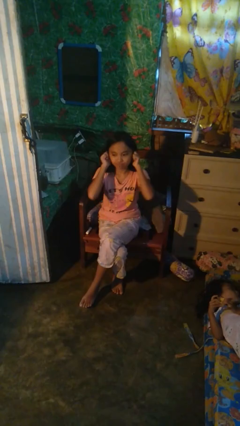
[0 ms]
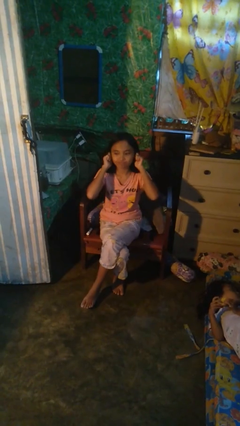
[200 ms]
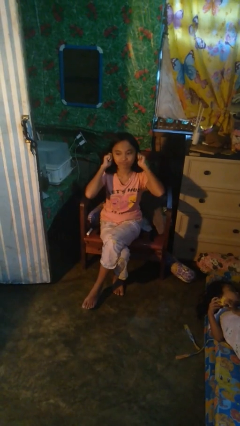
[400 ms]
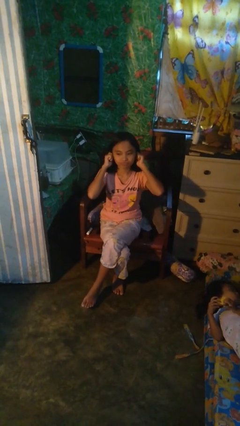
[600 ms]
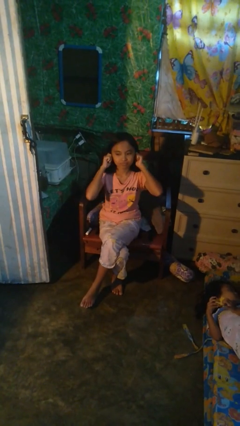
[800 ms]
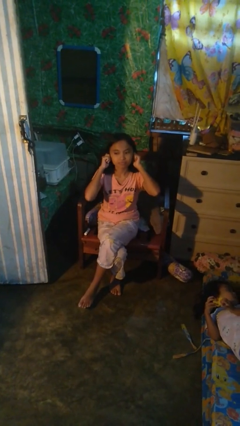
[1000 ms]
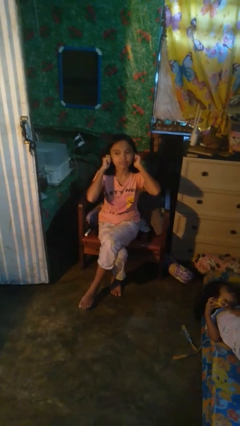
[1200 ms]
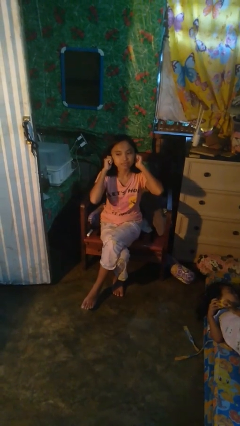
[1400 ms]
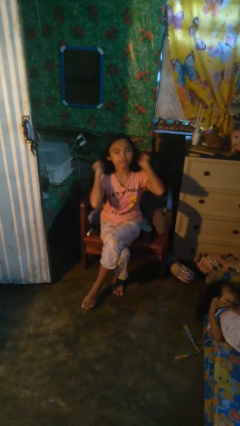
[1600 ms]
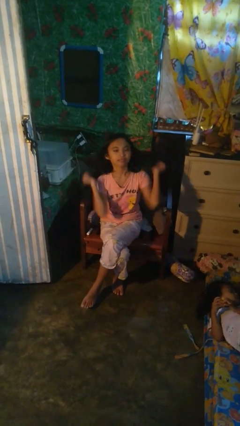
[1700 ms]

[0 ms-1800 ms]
person puts fingers in ear

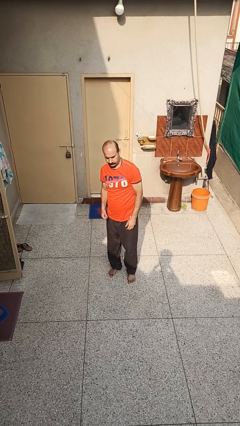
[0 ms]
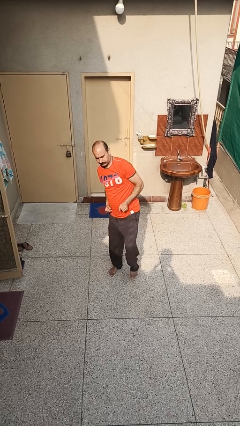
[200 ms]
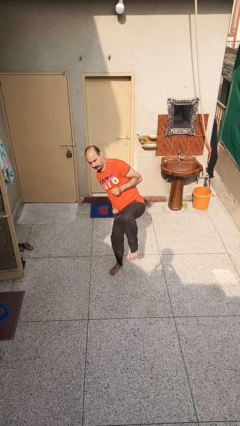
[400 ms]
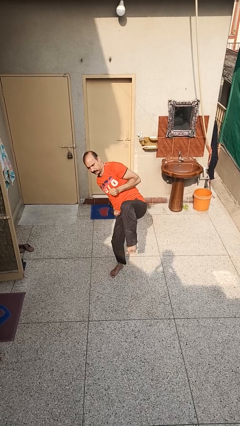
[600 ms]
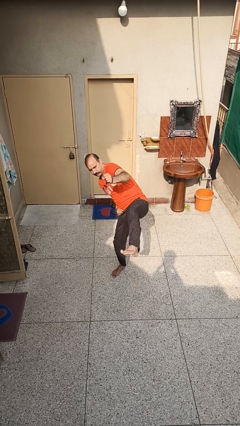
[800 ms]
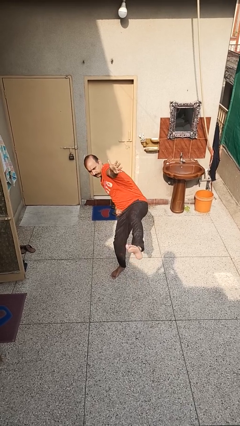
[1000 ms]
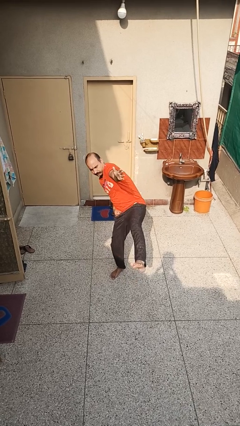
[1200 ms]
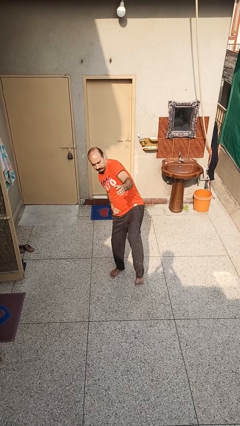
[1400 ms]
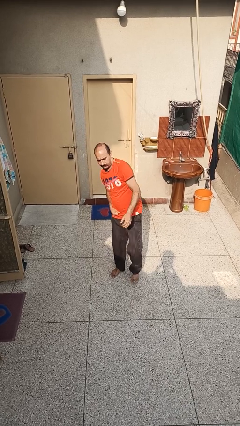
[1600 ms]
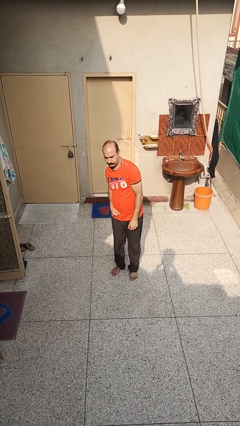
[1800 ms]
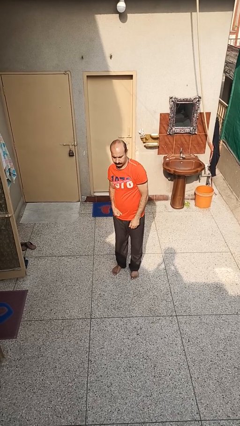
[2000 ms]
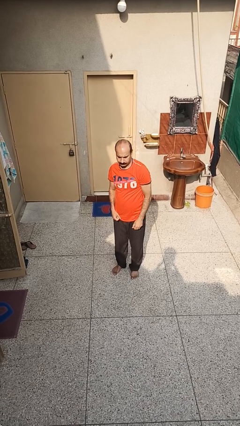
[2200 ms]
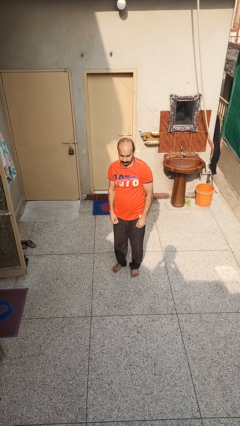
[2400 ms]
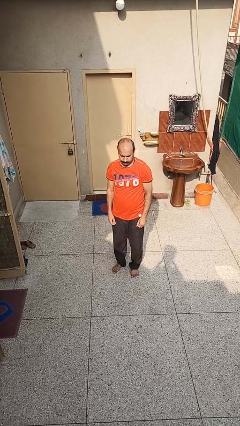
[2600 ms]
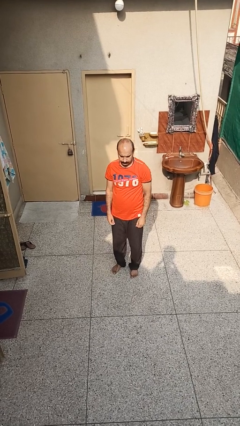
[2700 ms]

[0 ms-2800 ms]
person karate kicks

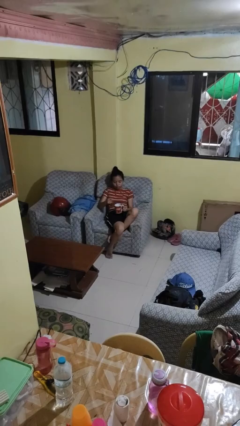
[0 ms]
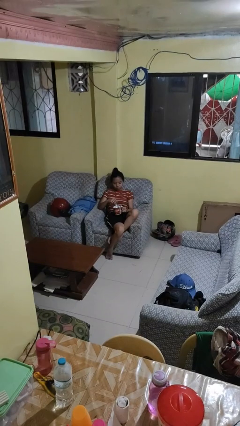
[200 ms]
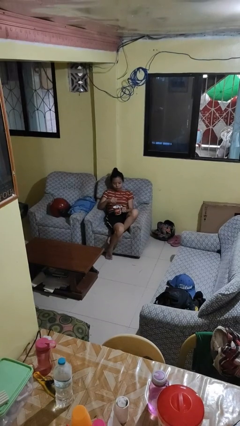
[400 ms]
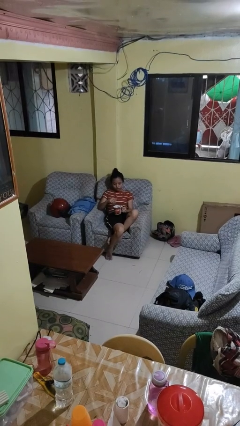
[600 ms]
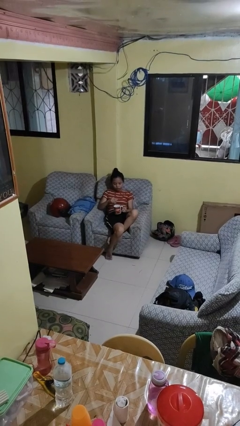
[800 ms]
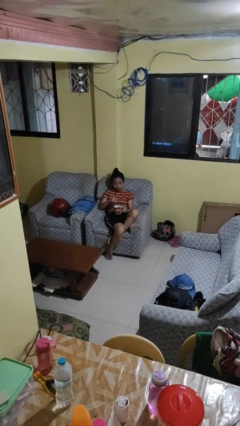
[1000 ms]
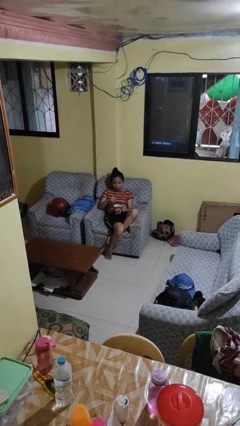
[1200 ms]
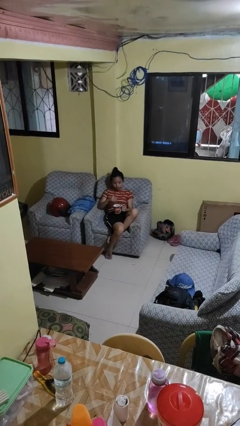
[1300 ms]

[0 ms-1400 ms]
person stirs mug

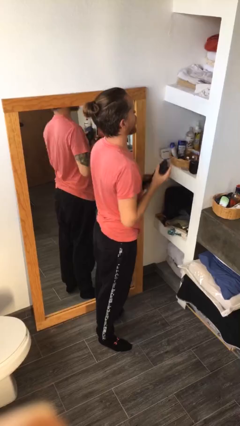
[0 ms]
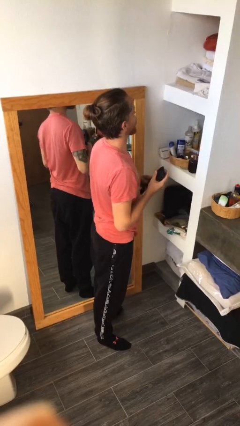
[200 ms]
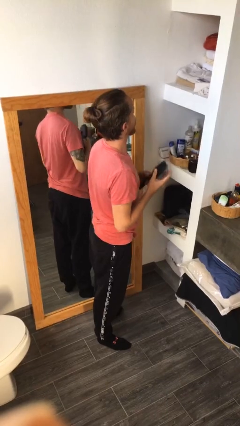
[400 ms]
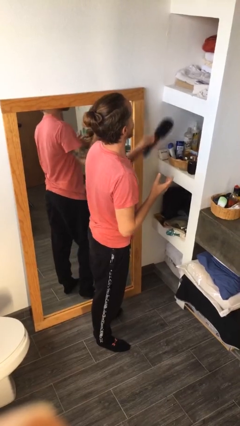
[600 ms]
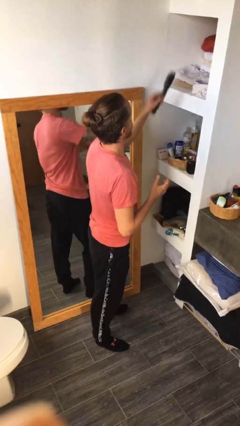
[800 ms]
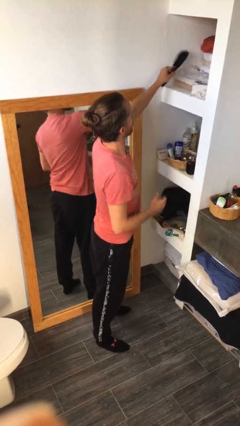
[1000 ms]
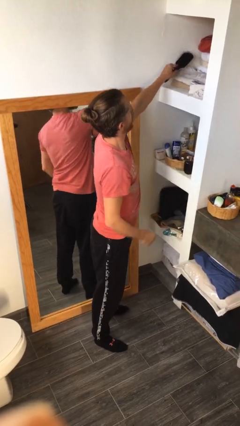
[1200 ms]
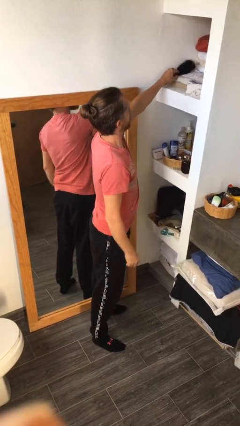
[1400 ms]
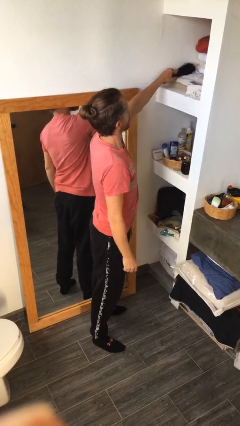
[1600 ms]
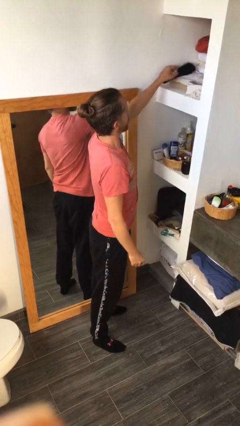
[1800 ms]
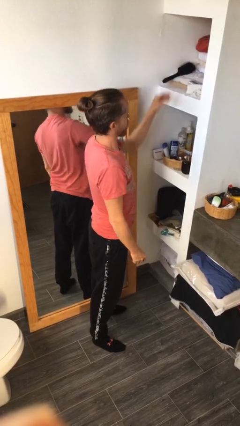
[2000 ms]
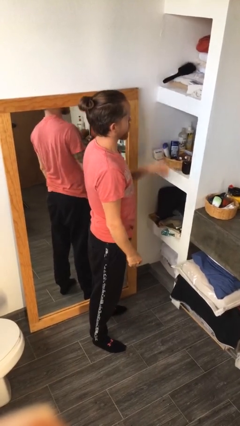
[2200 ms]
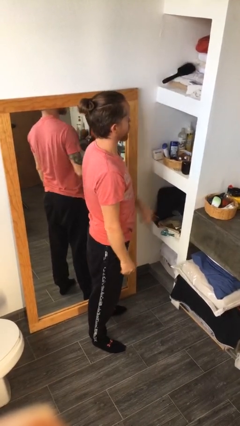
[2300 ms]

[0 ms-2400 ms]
person puts down object on countertop

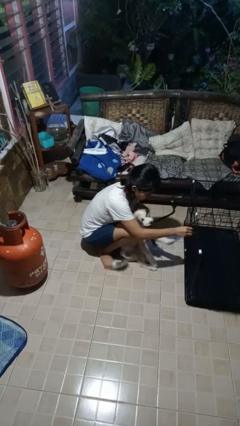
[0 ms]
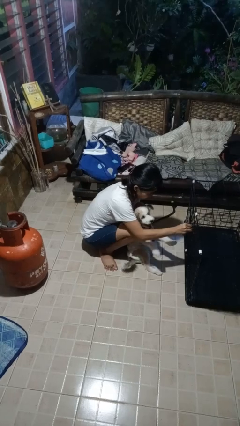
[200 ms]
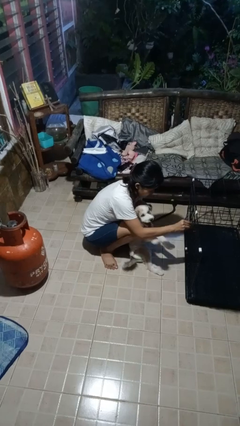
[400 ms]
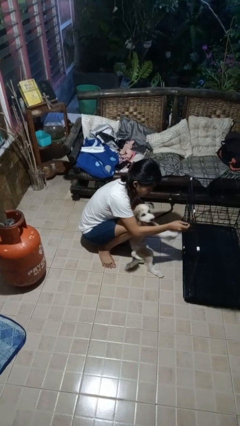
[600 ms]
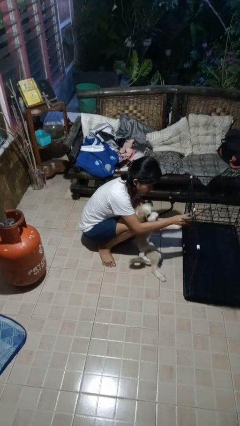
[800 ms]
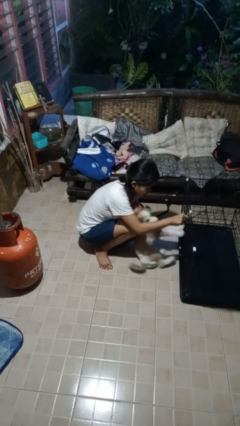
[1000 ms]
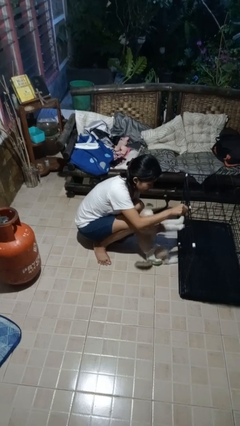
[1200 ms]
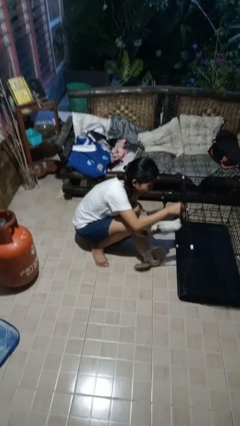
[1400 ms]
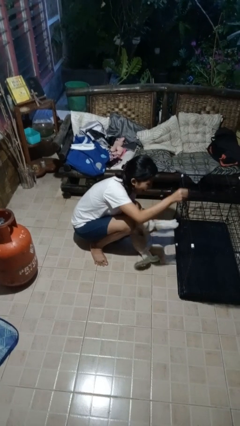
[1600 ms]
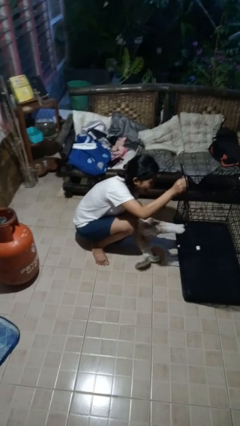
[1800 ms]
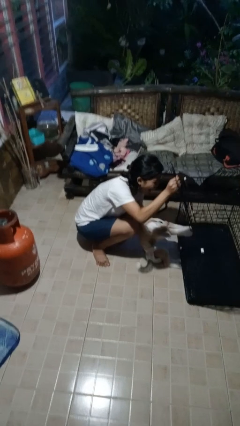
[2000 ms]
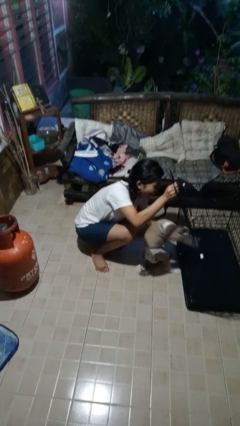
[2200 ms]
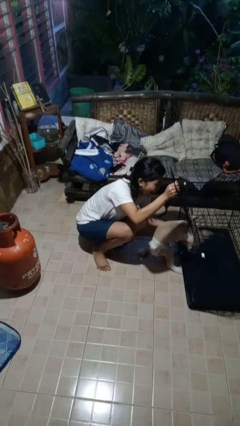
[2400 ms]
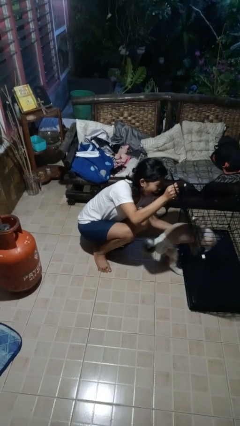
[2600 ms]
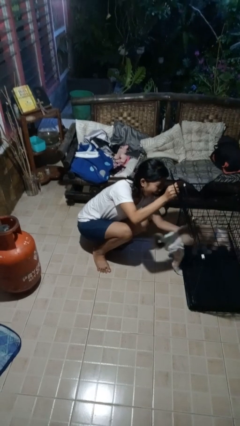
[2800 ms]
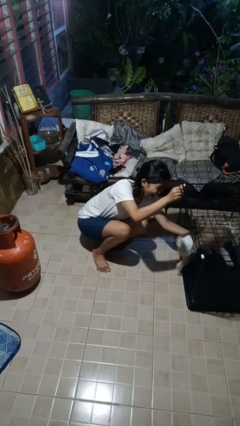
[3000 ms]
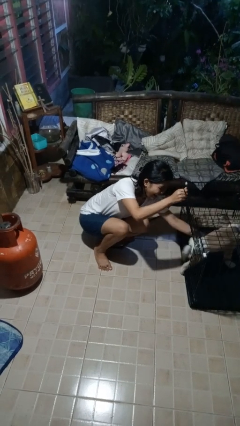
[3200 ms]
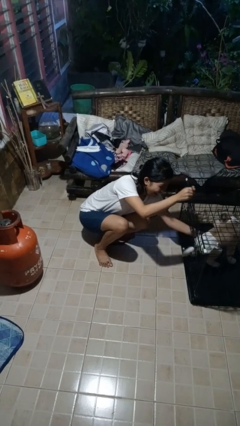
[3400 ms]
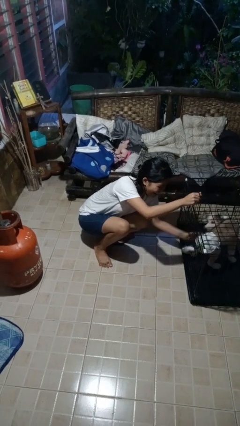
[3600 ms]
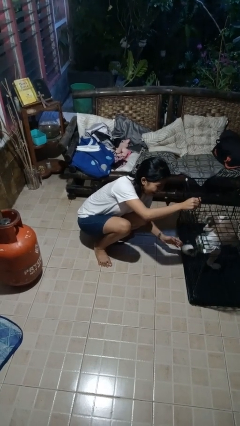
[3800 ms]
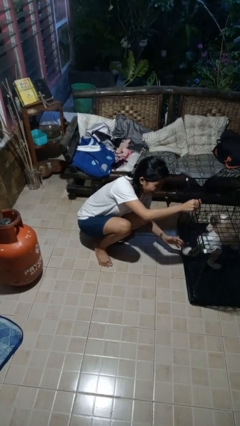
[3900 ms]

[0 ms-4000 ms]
person crates dog

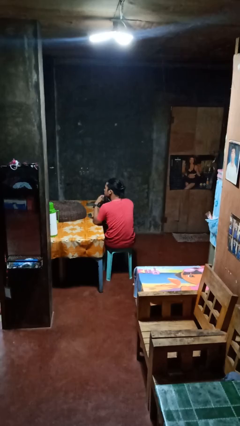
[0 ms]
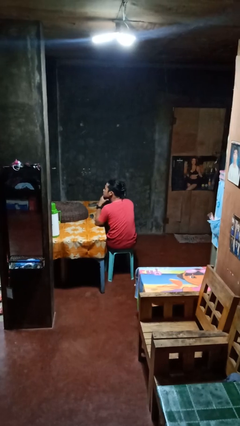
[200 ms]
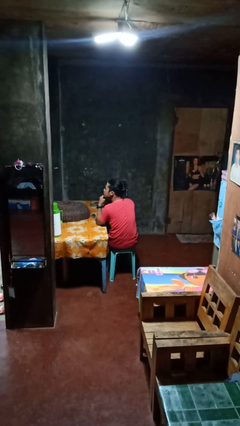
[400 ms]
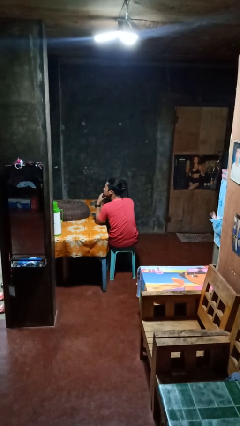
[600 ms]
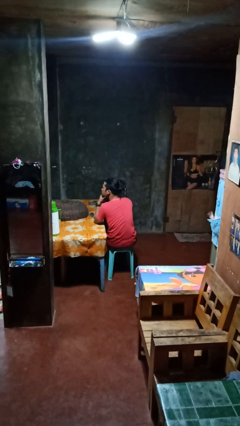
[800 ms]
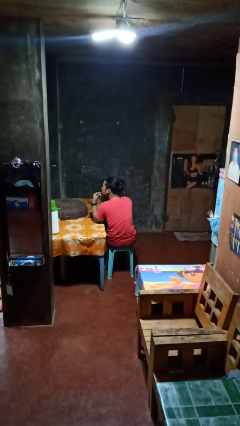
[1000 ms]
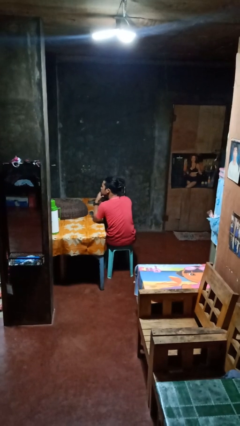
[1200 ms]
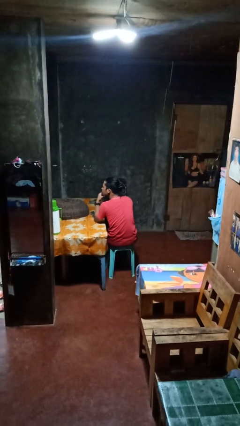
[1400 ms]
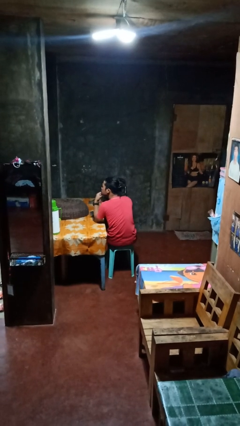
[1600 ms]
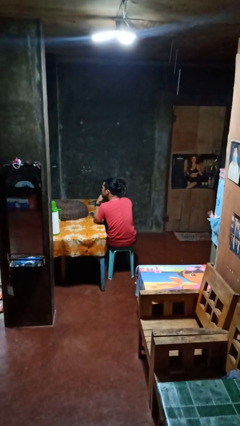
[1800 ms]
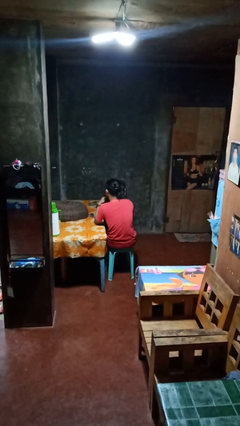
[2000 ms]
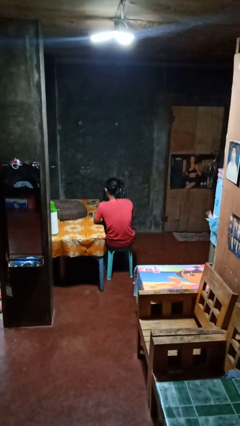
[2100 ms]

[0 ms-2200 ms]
person strokes chin

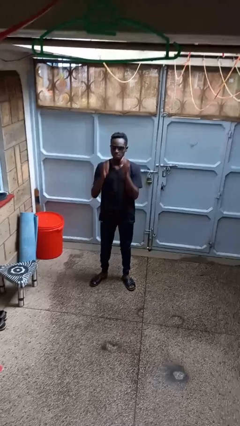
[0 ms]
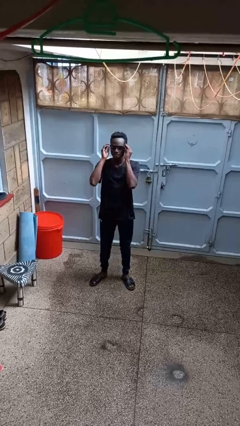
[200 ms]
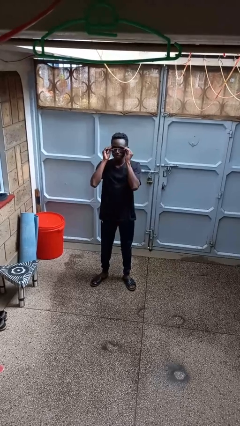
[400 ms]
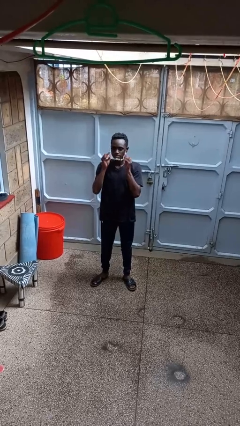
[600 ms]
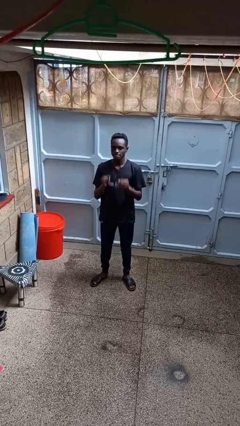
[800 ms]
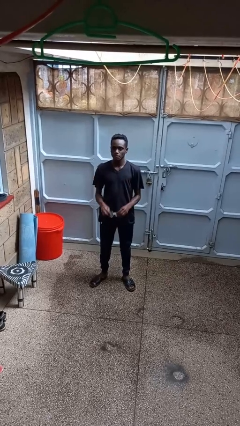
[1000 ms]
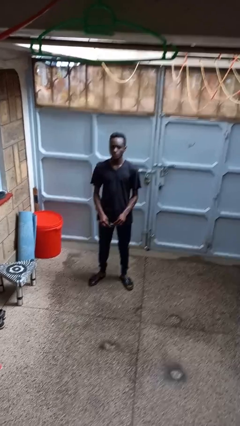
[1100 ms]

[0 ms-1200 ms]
person takes off sunglasses

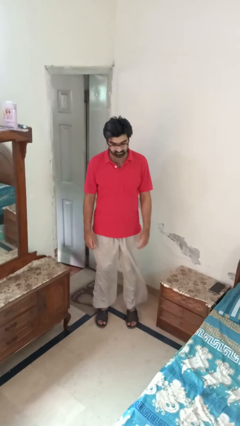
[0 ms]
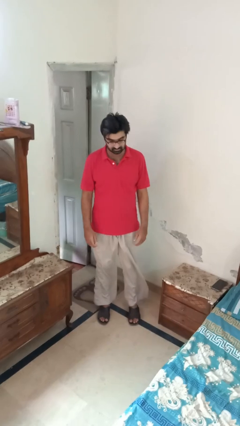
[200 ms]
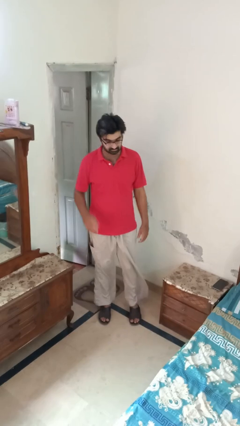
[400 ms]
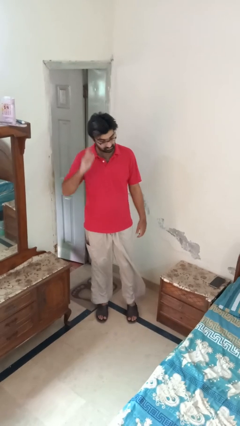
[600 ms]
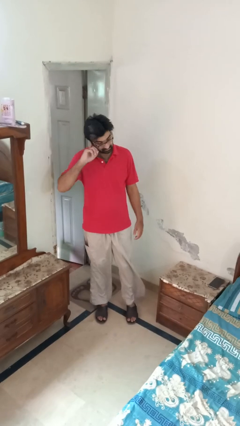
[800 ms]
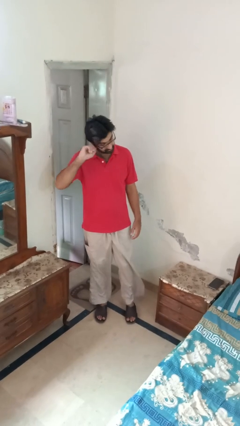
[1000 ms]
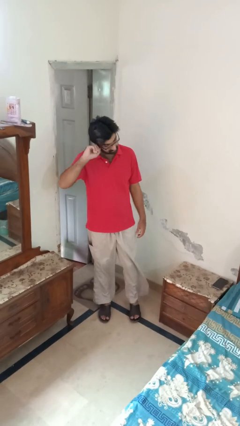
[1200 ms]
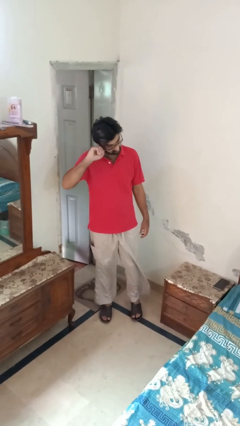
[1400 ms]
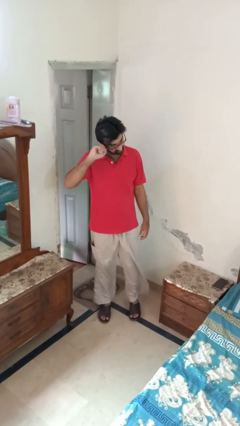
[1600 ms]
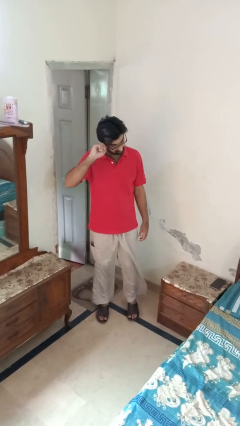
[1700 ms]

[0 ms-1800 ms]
person touches earlobe
